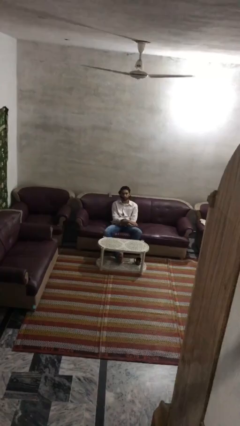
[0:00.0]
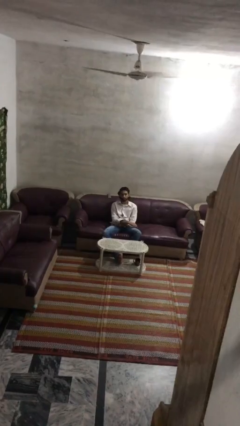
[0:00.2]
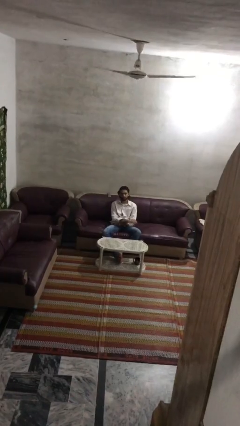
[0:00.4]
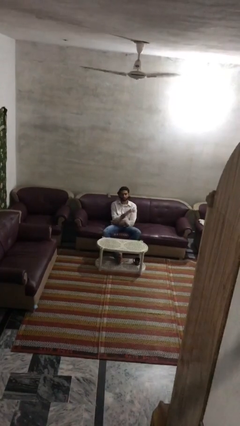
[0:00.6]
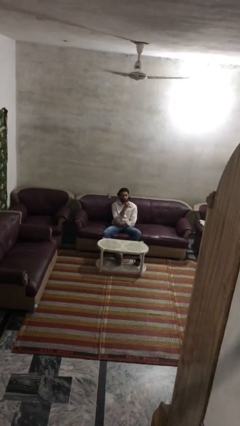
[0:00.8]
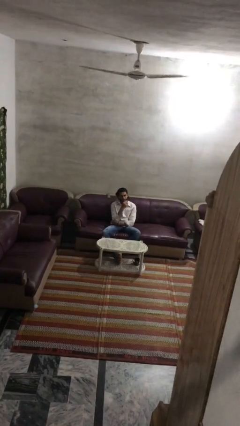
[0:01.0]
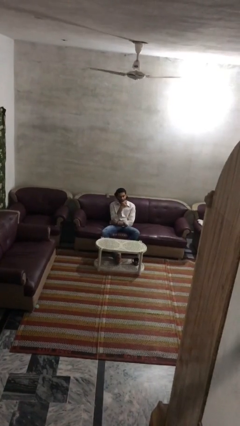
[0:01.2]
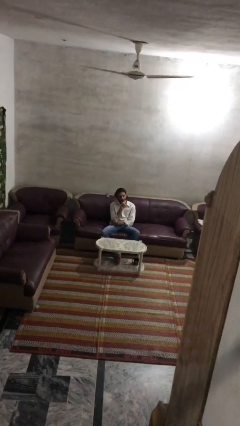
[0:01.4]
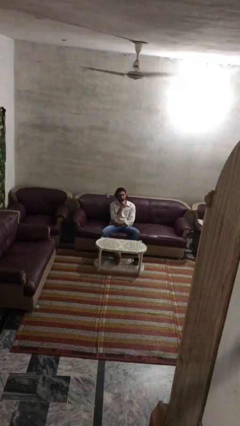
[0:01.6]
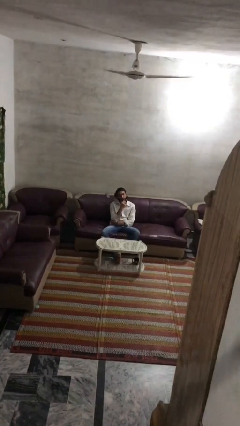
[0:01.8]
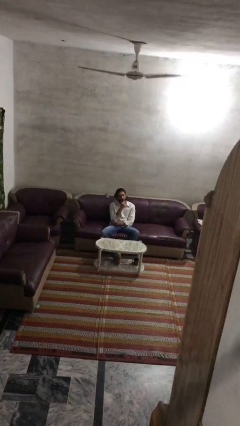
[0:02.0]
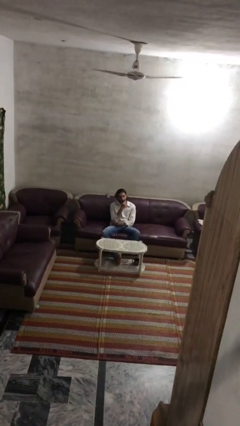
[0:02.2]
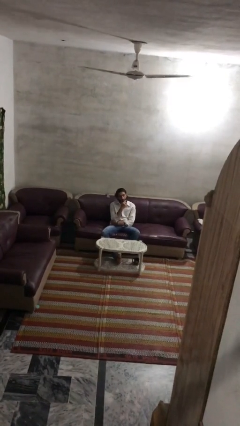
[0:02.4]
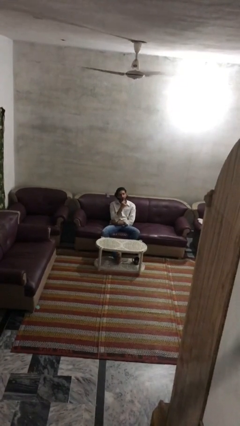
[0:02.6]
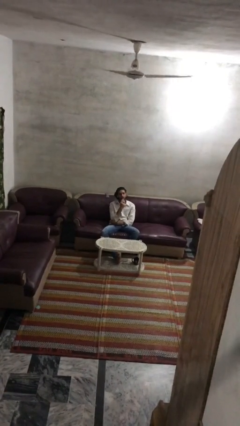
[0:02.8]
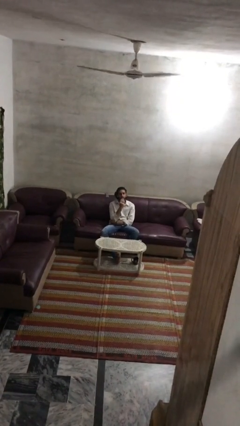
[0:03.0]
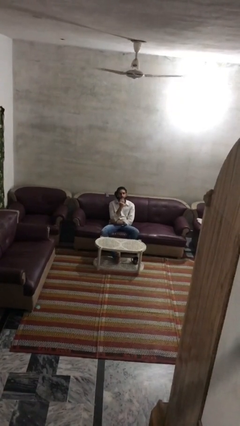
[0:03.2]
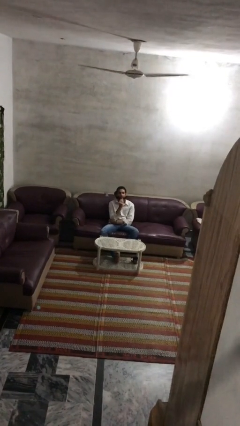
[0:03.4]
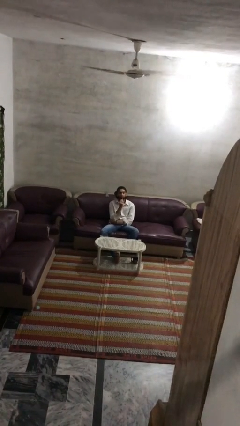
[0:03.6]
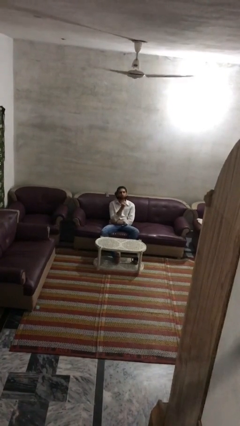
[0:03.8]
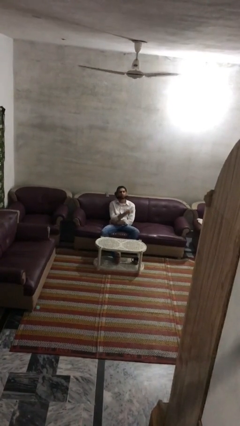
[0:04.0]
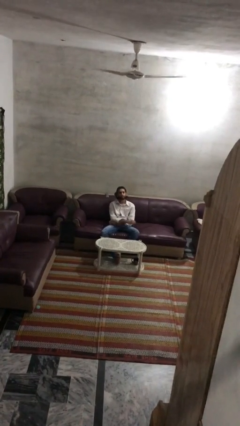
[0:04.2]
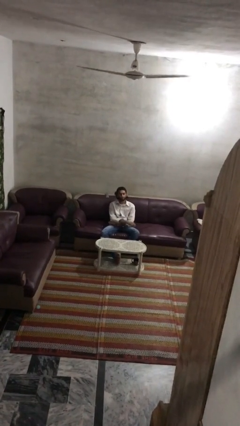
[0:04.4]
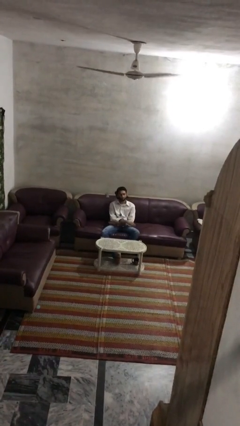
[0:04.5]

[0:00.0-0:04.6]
person strokes chin

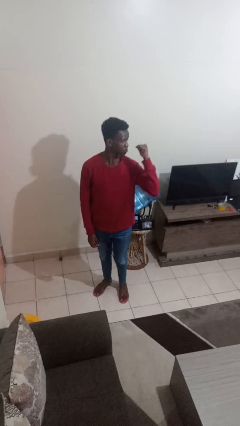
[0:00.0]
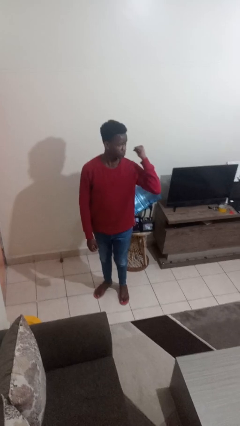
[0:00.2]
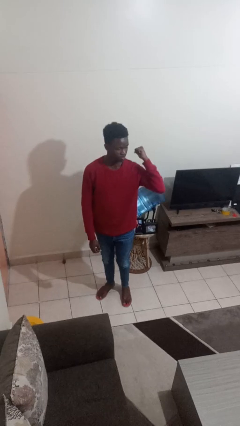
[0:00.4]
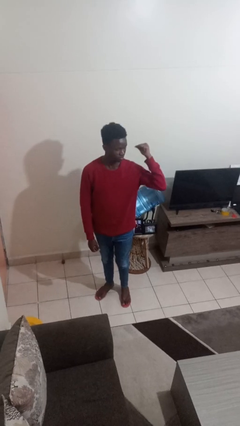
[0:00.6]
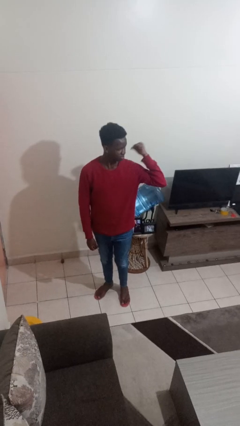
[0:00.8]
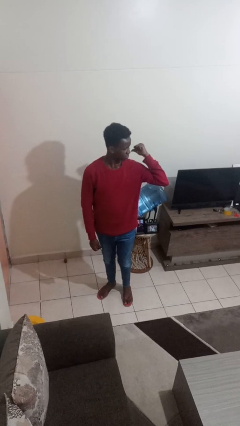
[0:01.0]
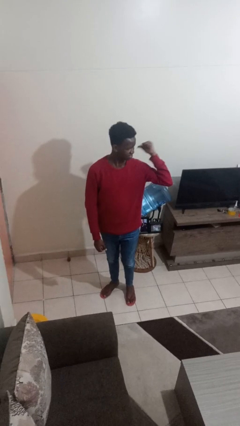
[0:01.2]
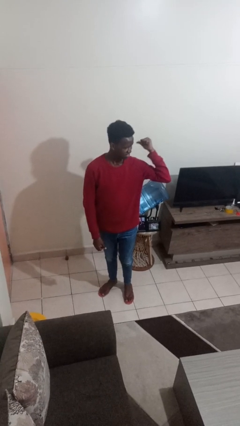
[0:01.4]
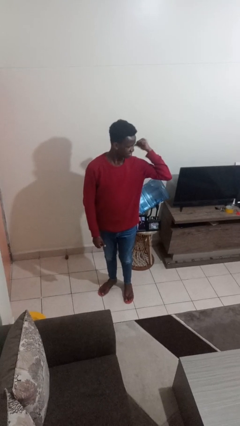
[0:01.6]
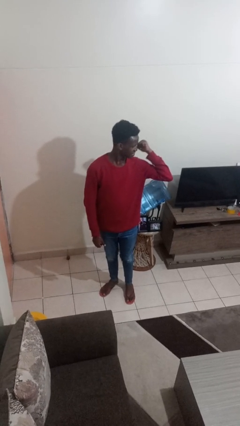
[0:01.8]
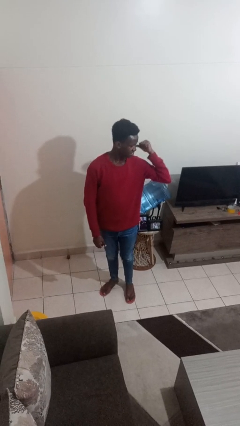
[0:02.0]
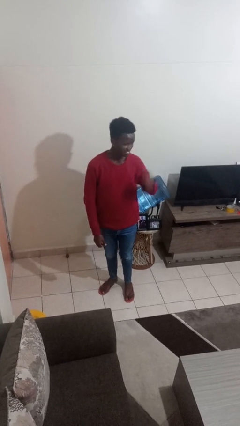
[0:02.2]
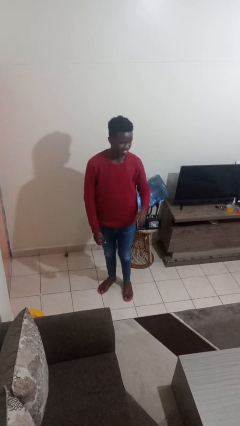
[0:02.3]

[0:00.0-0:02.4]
person gestures behind me

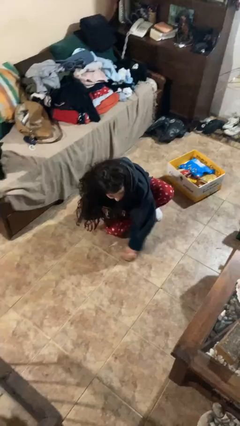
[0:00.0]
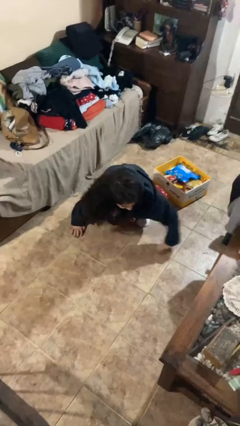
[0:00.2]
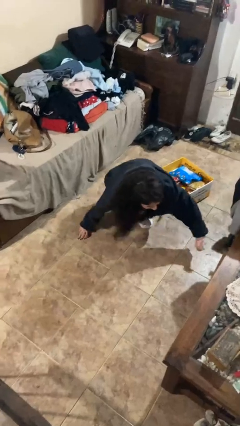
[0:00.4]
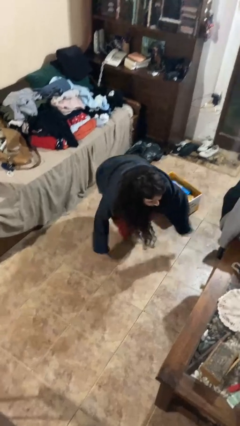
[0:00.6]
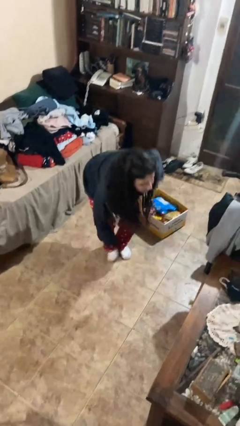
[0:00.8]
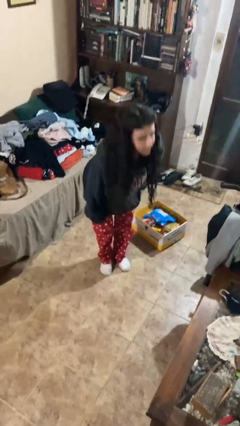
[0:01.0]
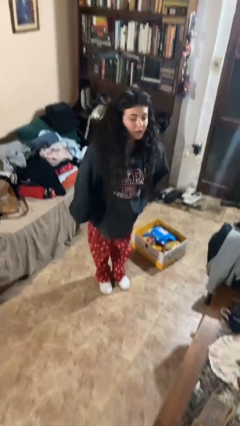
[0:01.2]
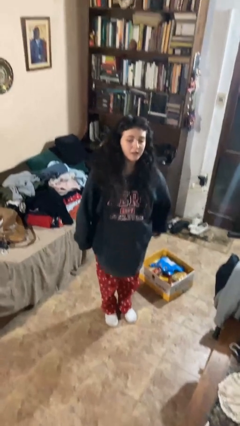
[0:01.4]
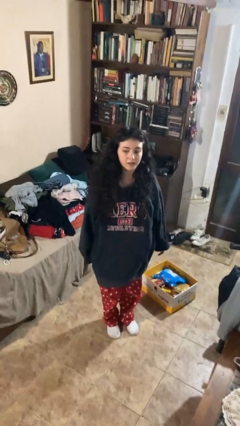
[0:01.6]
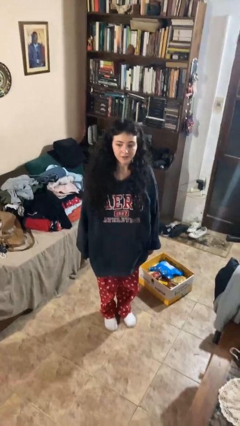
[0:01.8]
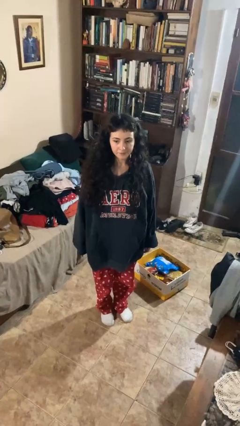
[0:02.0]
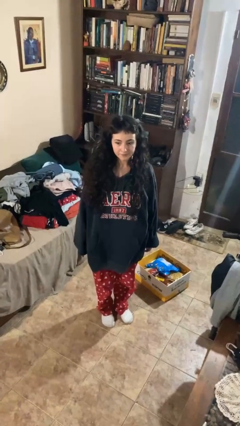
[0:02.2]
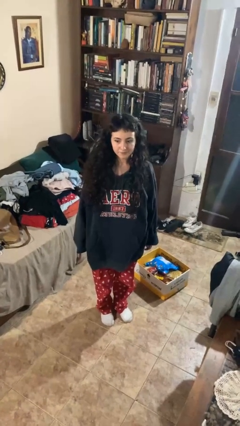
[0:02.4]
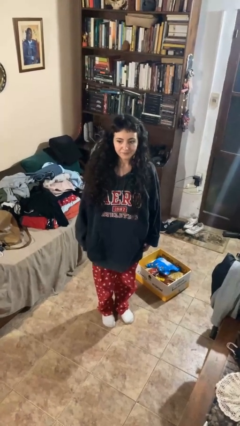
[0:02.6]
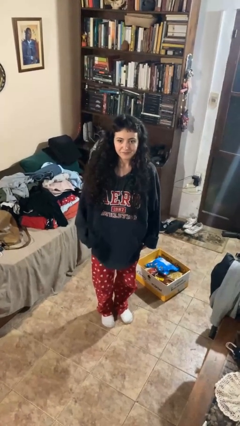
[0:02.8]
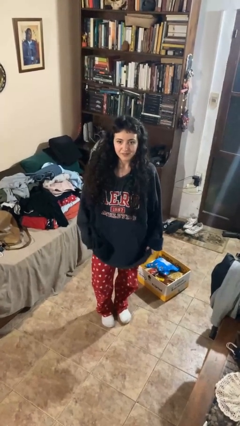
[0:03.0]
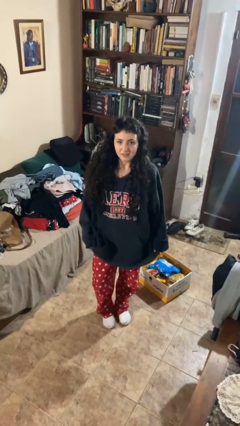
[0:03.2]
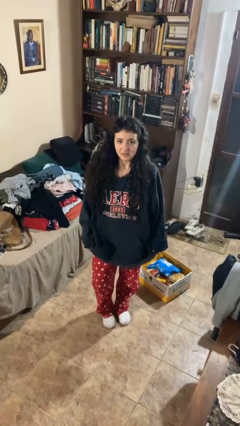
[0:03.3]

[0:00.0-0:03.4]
person stands up from floor

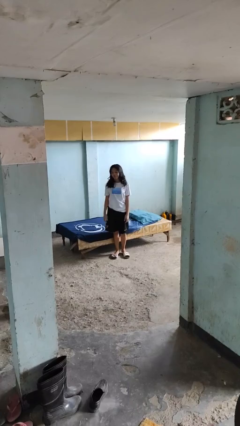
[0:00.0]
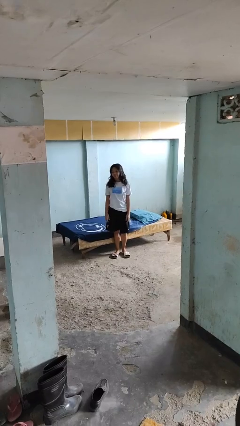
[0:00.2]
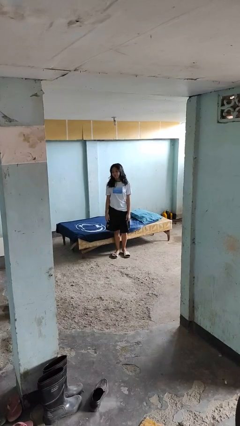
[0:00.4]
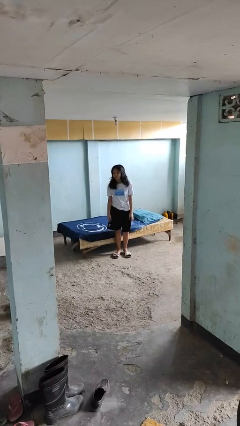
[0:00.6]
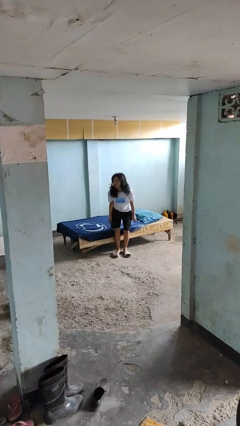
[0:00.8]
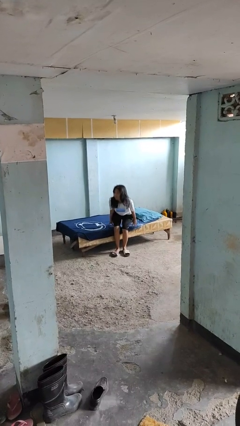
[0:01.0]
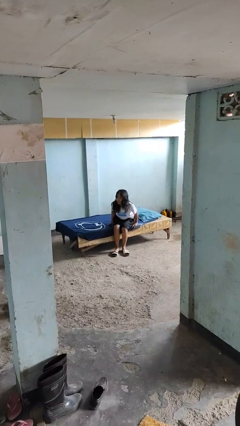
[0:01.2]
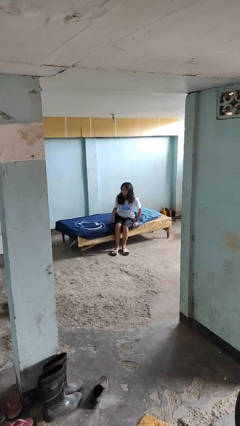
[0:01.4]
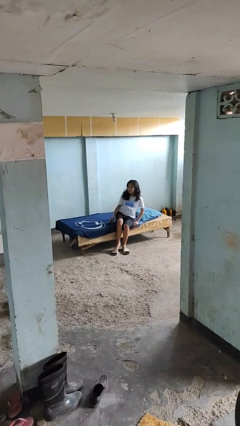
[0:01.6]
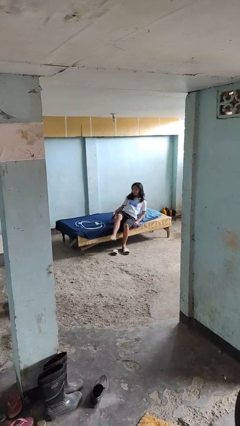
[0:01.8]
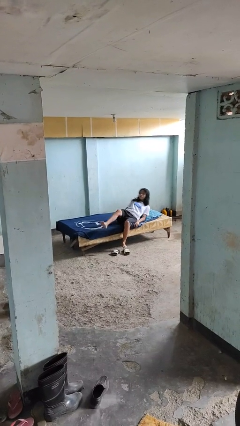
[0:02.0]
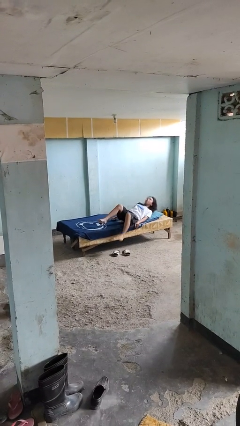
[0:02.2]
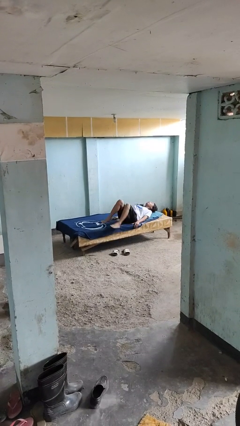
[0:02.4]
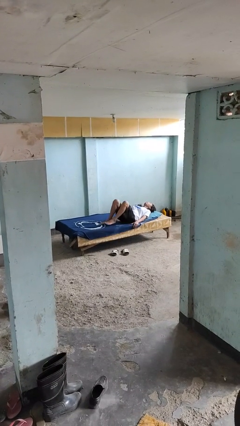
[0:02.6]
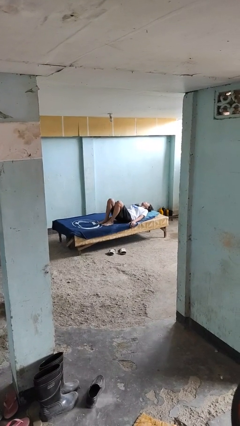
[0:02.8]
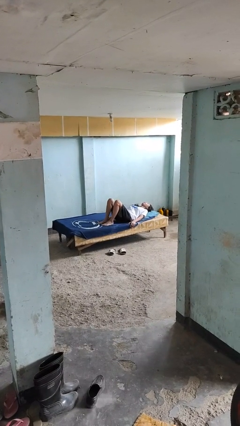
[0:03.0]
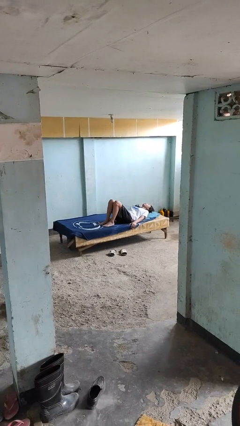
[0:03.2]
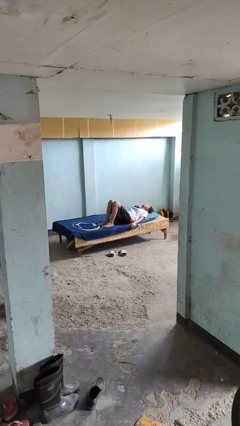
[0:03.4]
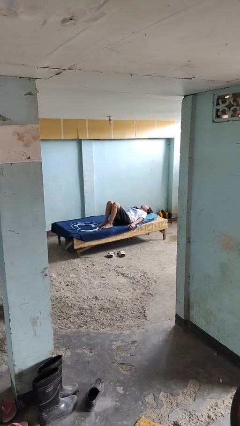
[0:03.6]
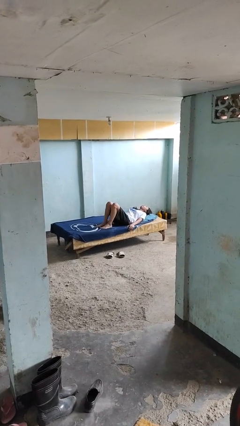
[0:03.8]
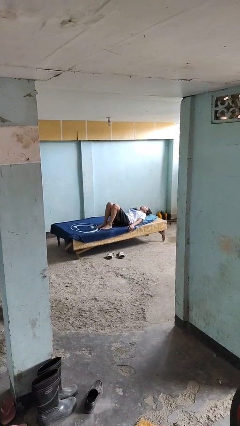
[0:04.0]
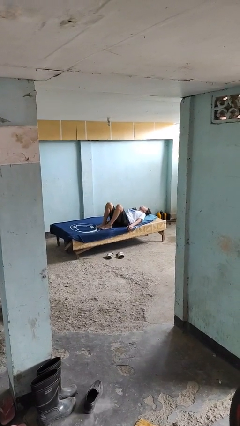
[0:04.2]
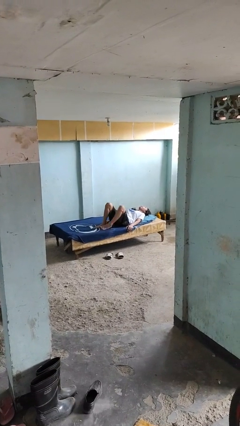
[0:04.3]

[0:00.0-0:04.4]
person lies down on bed

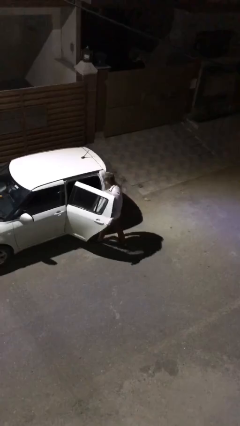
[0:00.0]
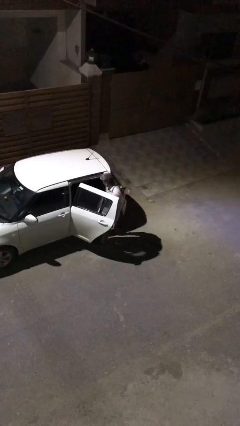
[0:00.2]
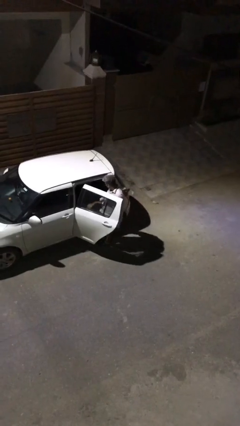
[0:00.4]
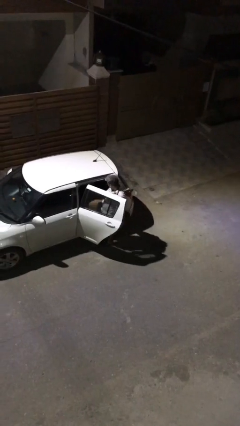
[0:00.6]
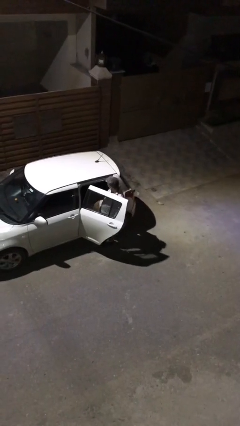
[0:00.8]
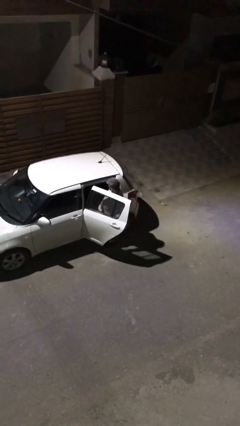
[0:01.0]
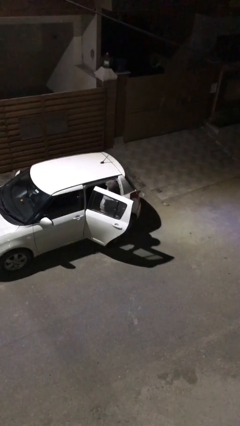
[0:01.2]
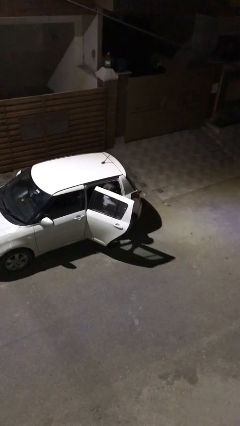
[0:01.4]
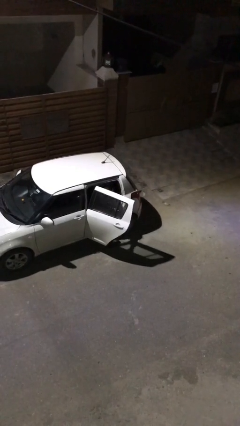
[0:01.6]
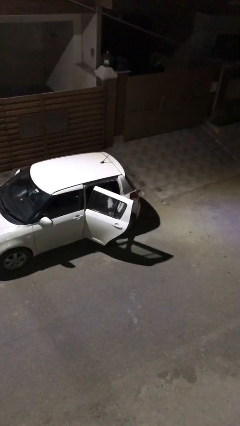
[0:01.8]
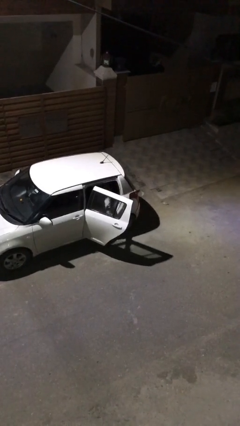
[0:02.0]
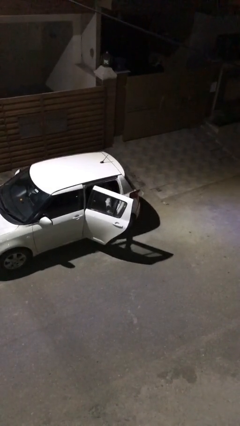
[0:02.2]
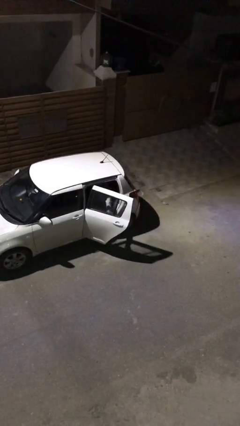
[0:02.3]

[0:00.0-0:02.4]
person enters car

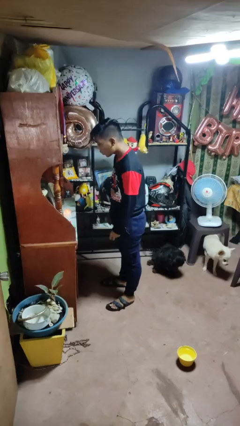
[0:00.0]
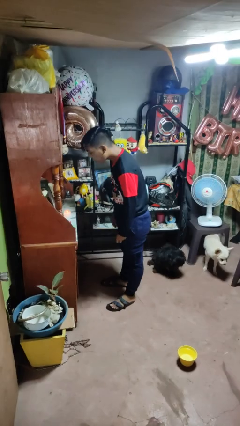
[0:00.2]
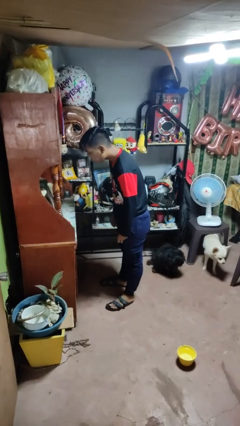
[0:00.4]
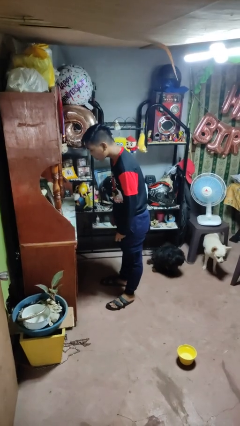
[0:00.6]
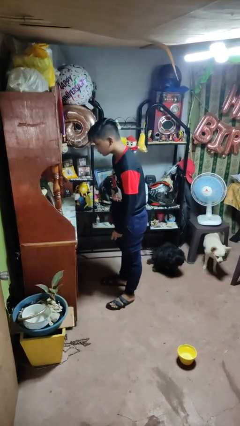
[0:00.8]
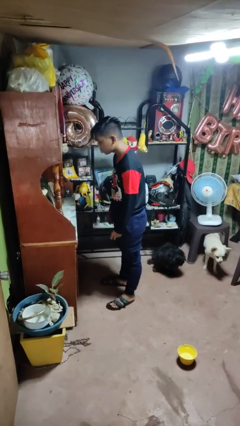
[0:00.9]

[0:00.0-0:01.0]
person extinguishes candle
